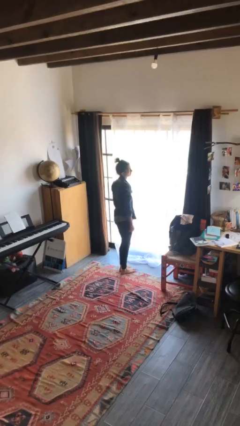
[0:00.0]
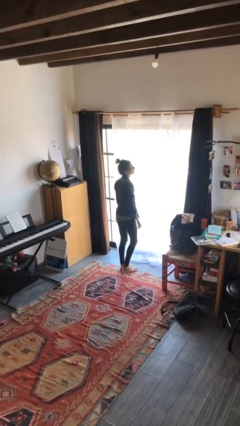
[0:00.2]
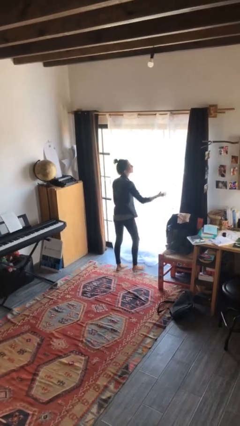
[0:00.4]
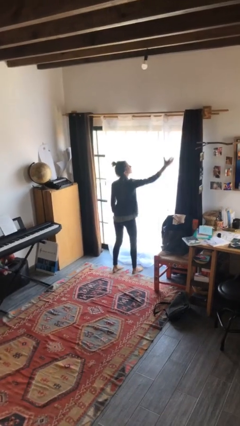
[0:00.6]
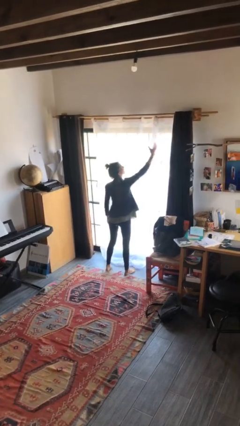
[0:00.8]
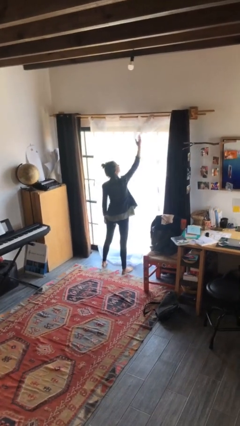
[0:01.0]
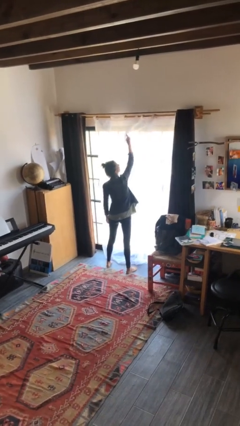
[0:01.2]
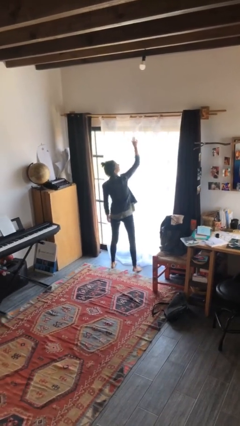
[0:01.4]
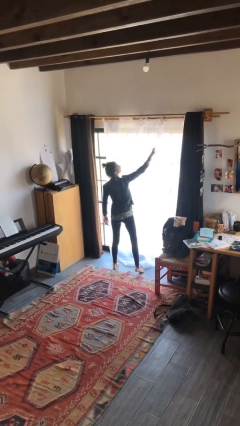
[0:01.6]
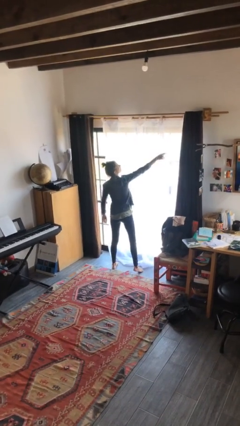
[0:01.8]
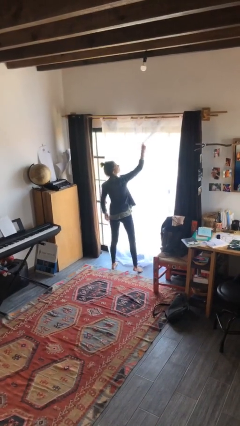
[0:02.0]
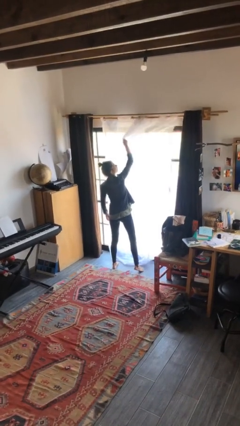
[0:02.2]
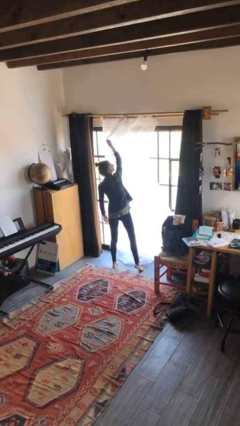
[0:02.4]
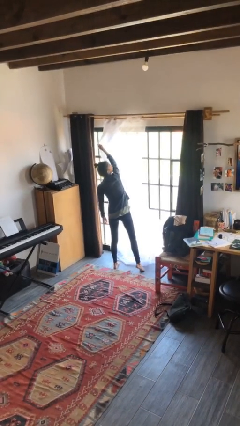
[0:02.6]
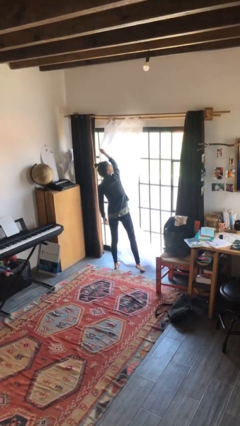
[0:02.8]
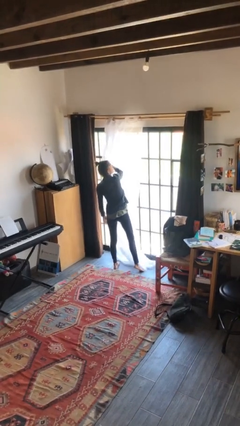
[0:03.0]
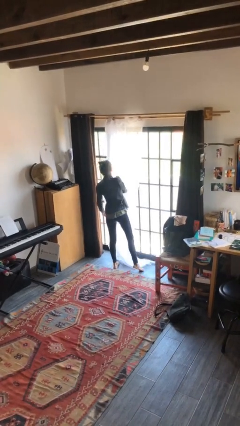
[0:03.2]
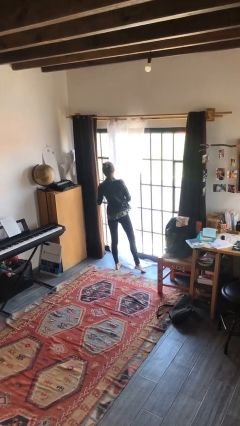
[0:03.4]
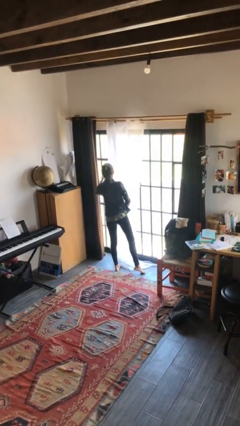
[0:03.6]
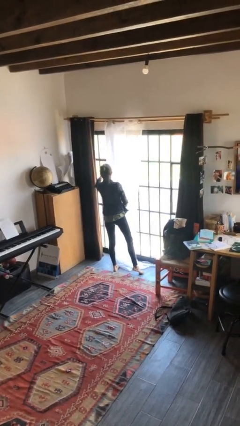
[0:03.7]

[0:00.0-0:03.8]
person opens curtains

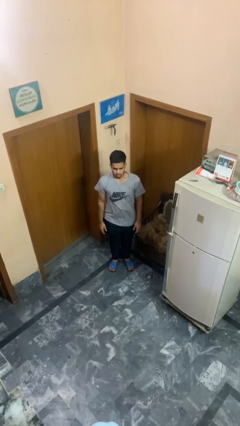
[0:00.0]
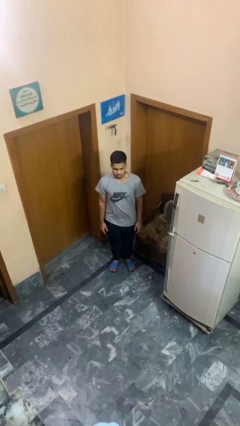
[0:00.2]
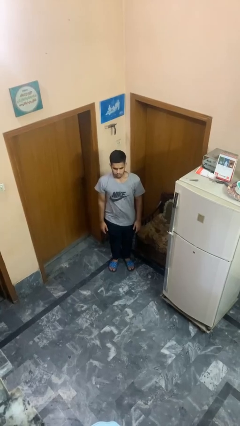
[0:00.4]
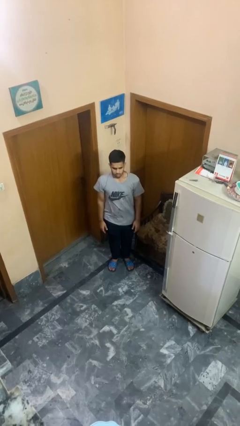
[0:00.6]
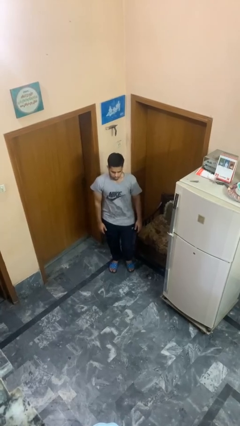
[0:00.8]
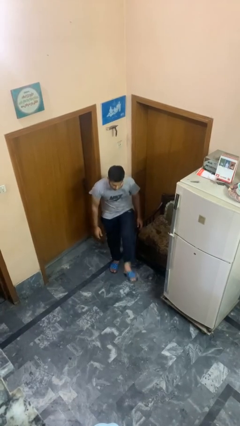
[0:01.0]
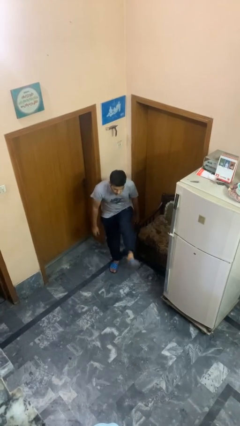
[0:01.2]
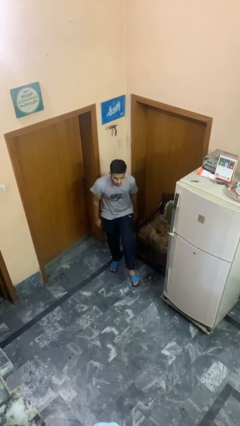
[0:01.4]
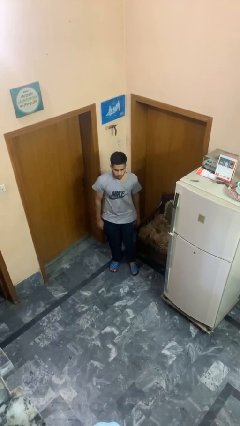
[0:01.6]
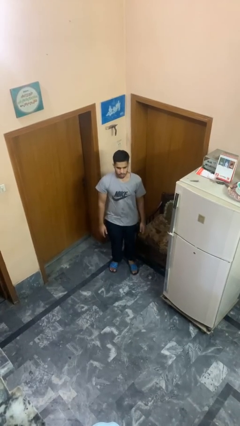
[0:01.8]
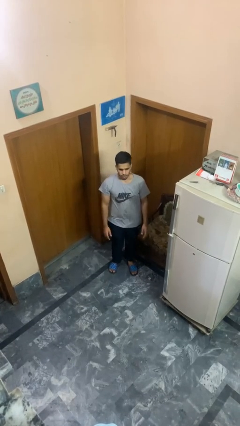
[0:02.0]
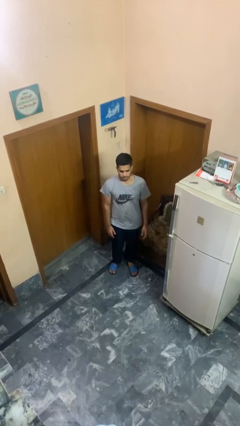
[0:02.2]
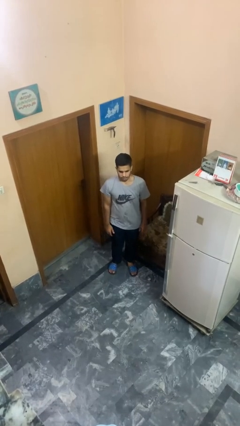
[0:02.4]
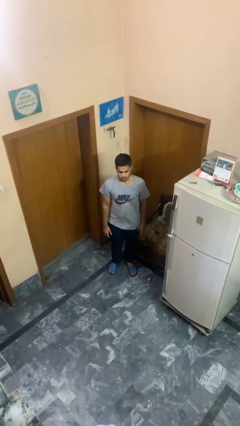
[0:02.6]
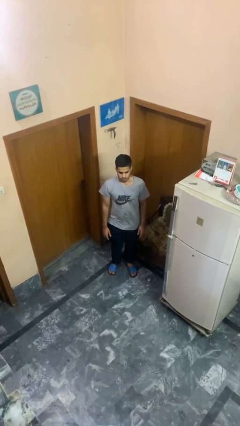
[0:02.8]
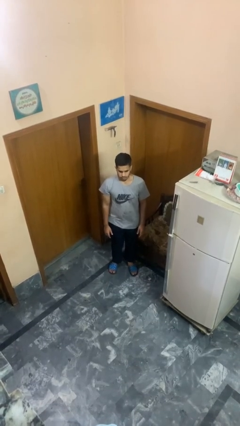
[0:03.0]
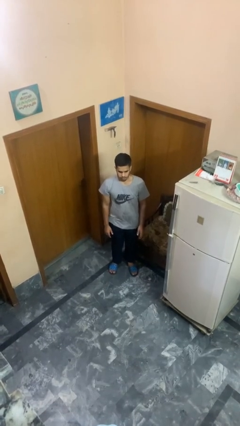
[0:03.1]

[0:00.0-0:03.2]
person karate kicks

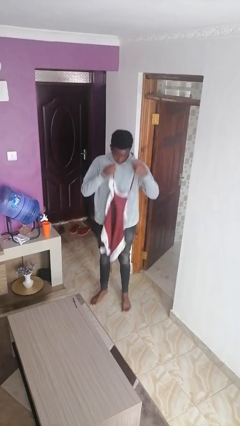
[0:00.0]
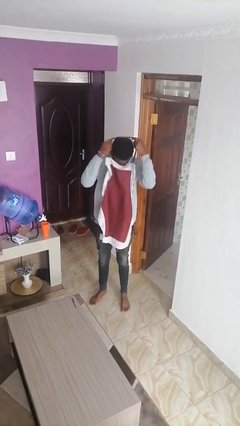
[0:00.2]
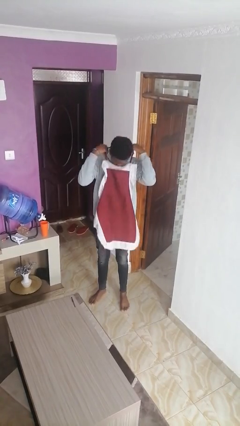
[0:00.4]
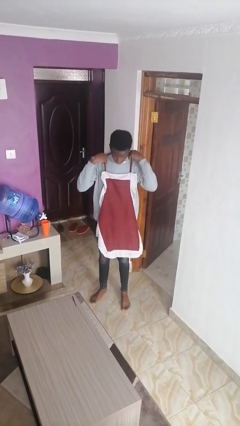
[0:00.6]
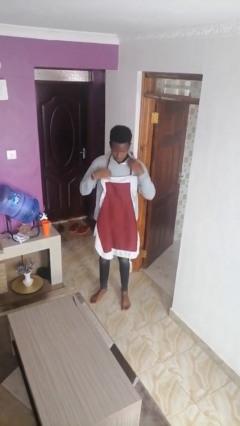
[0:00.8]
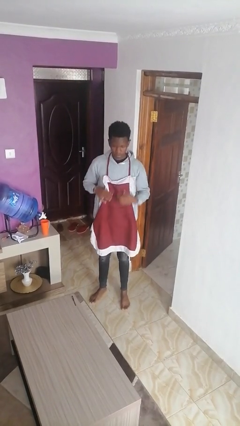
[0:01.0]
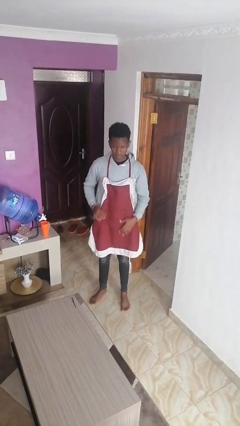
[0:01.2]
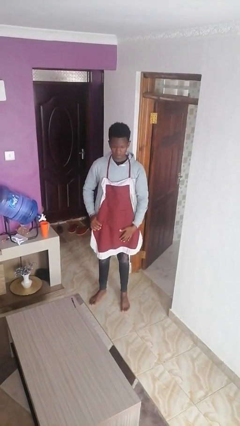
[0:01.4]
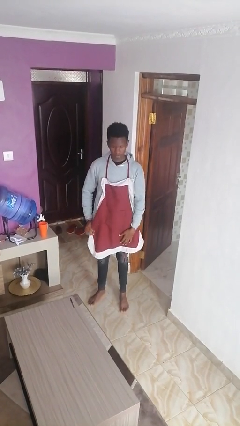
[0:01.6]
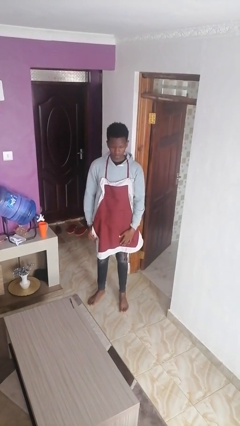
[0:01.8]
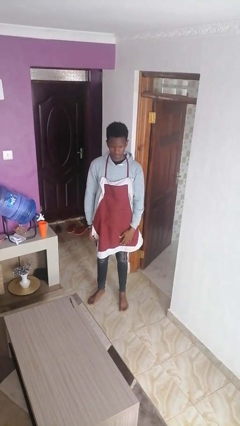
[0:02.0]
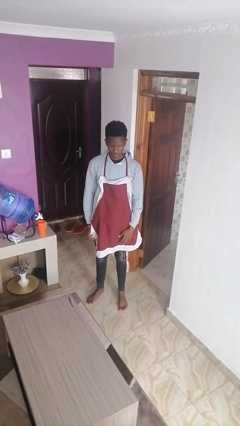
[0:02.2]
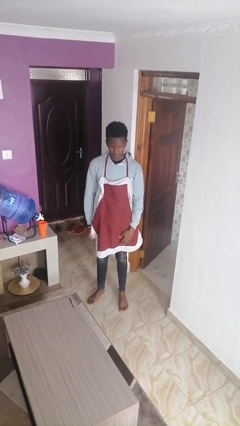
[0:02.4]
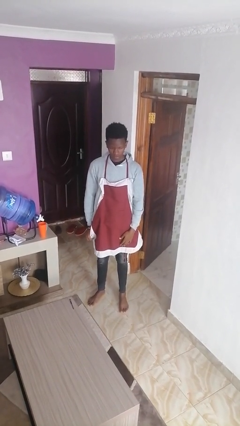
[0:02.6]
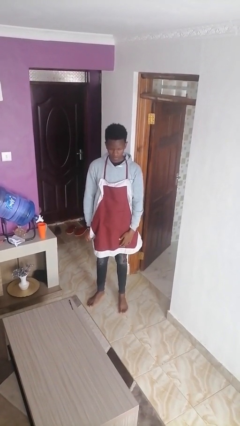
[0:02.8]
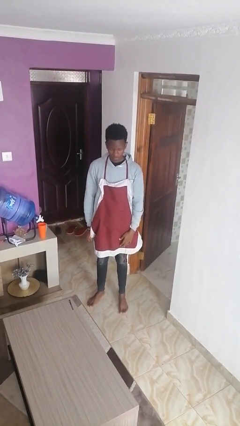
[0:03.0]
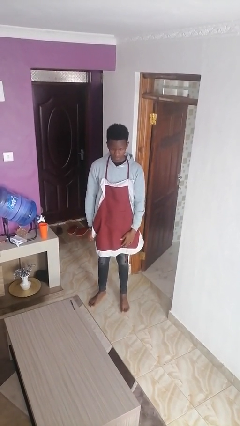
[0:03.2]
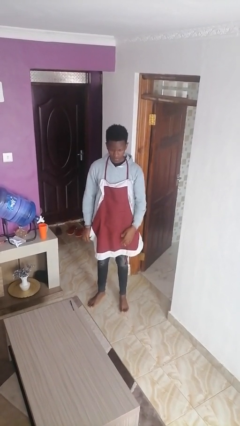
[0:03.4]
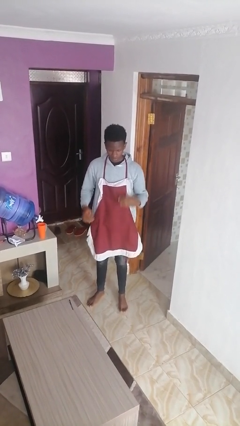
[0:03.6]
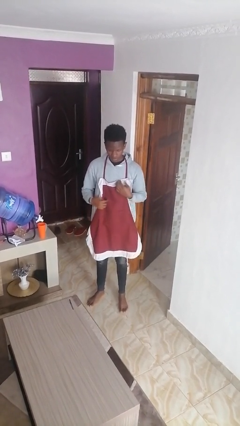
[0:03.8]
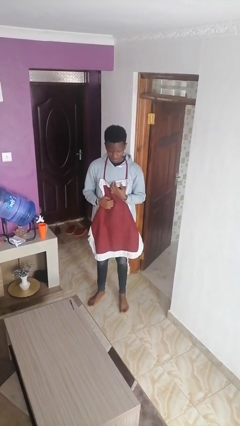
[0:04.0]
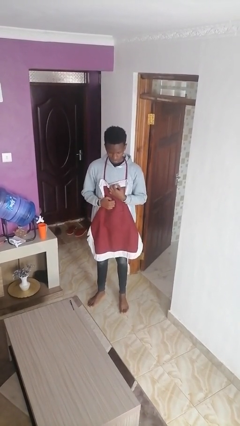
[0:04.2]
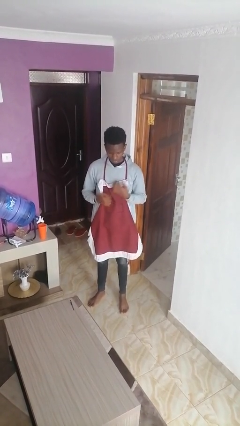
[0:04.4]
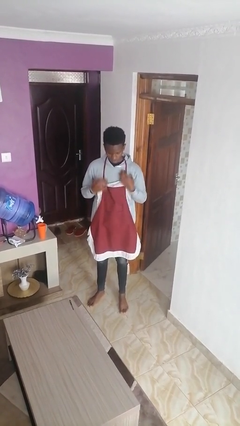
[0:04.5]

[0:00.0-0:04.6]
person puts on apron

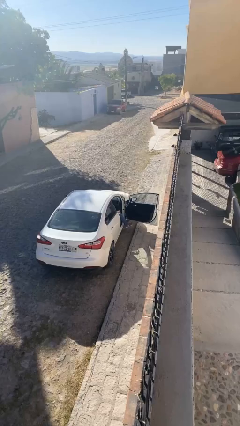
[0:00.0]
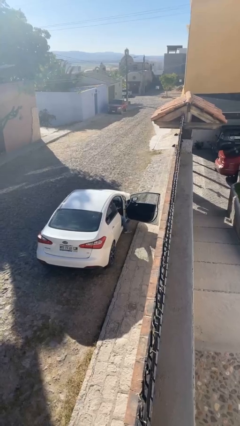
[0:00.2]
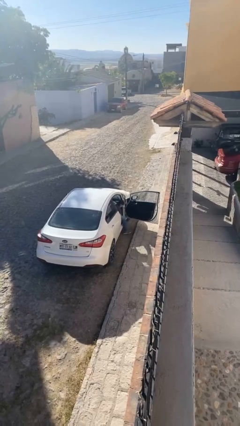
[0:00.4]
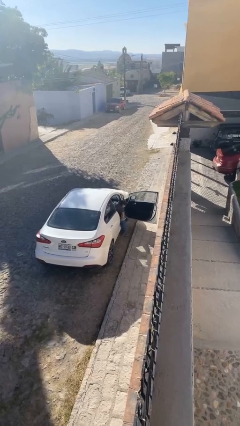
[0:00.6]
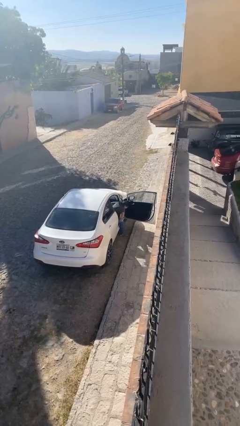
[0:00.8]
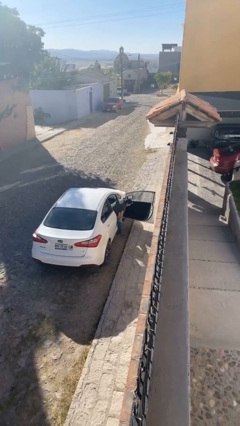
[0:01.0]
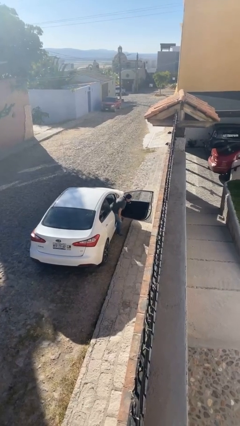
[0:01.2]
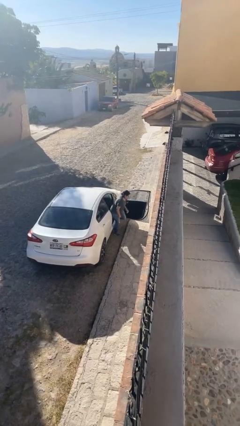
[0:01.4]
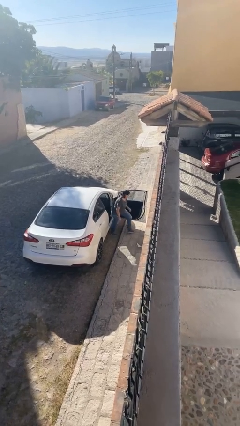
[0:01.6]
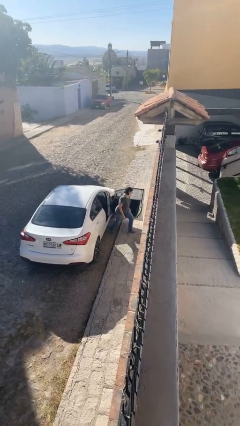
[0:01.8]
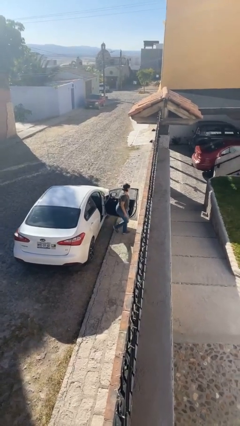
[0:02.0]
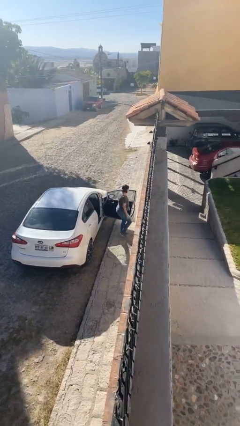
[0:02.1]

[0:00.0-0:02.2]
person exits car

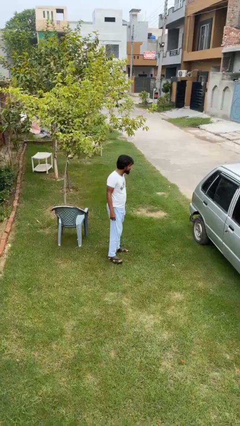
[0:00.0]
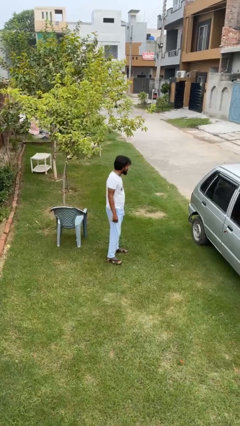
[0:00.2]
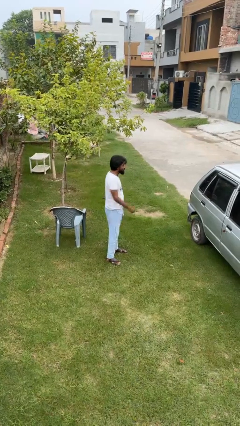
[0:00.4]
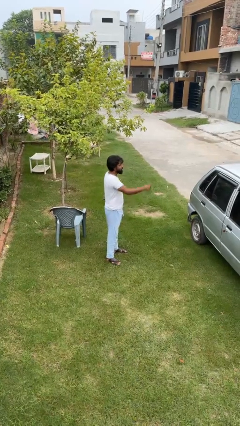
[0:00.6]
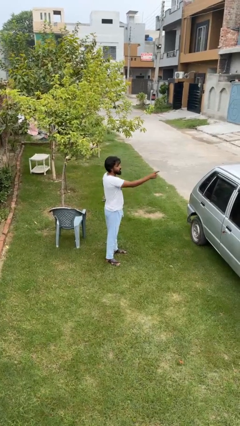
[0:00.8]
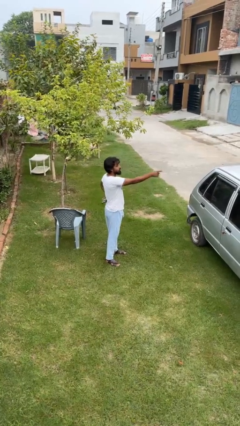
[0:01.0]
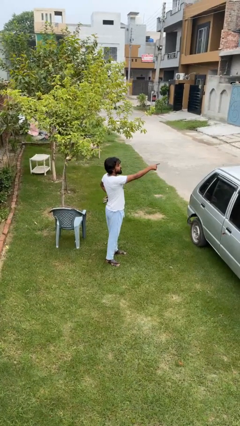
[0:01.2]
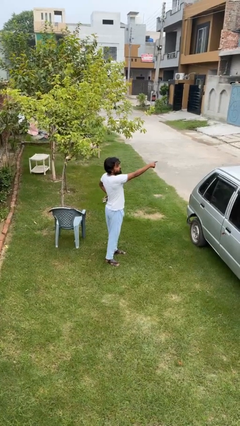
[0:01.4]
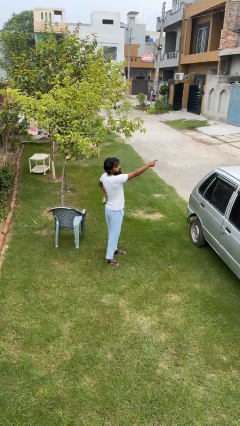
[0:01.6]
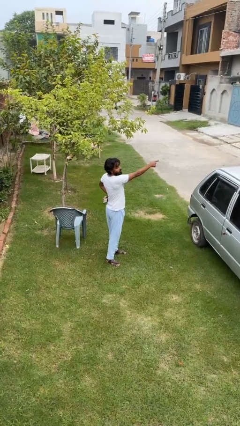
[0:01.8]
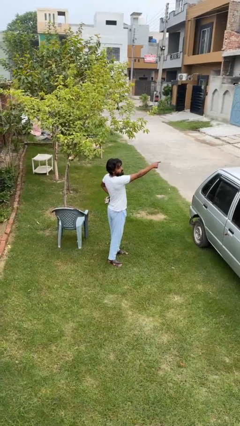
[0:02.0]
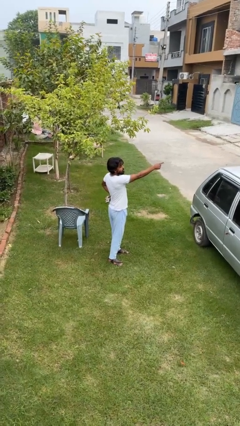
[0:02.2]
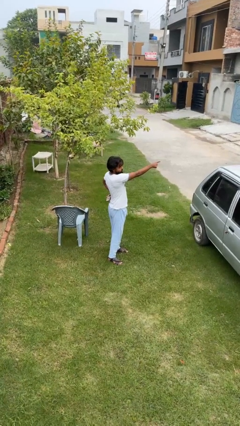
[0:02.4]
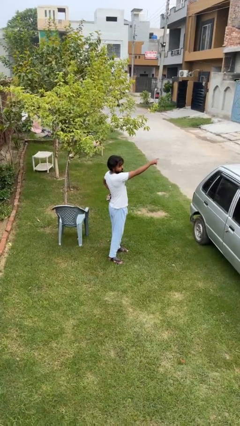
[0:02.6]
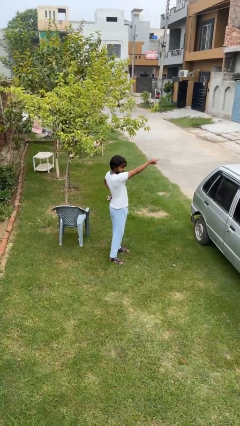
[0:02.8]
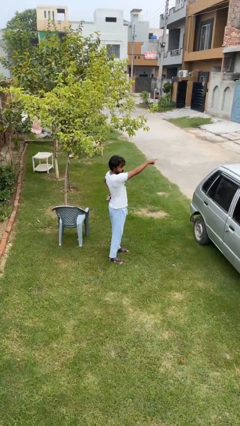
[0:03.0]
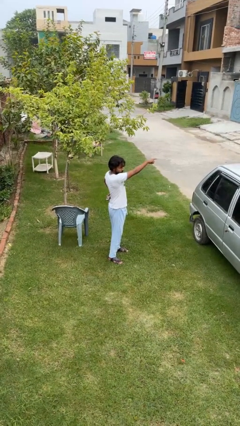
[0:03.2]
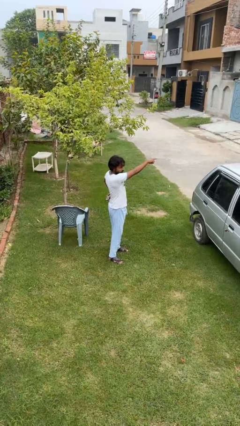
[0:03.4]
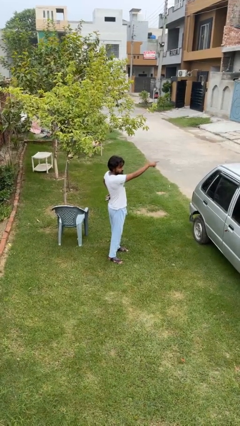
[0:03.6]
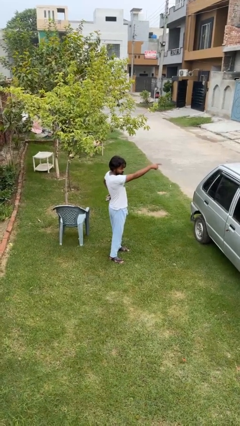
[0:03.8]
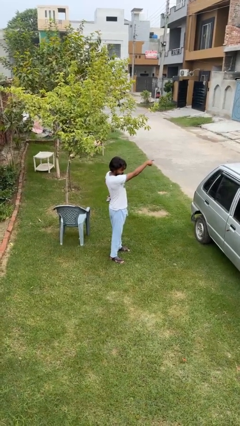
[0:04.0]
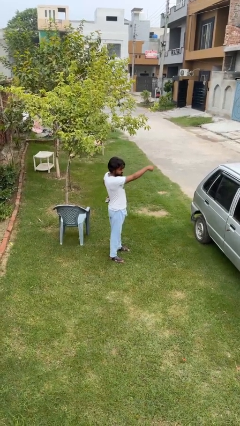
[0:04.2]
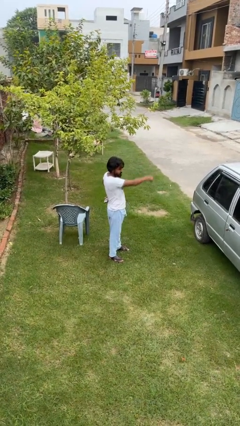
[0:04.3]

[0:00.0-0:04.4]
person points at person
